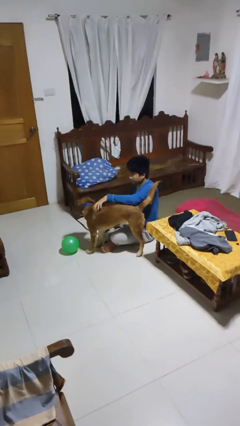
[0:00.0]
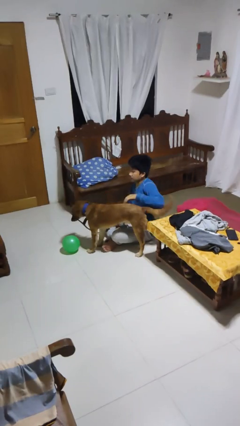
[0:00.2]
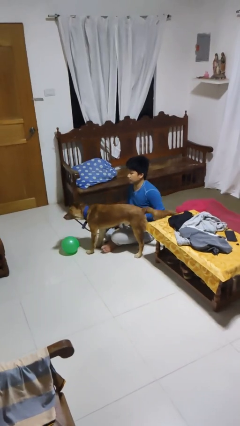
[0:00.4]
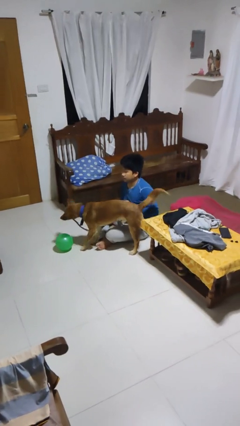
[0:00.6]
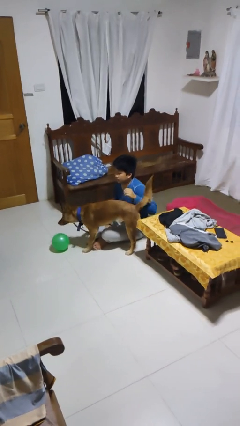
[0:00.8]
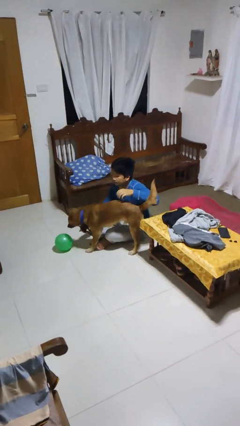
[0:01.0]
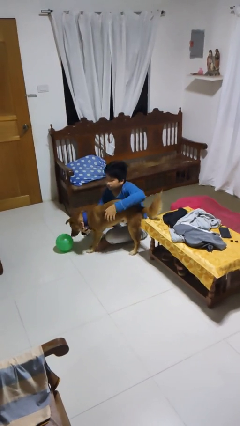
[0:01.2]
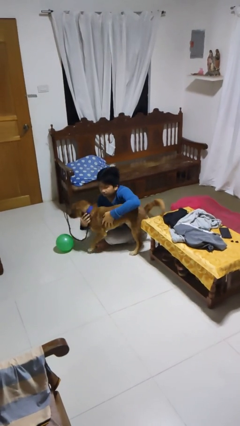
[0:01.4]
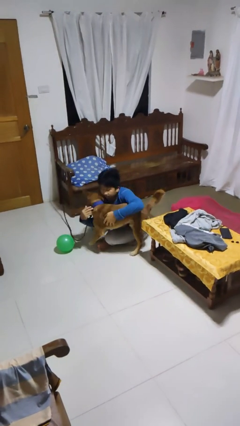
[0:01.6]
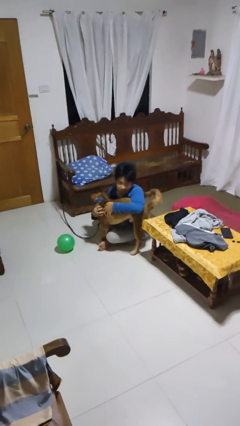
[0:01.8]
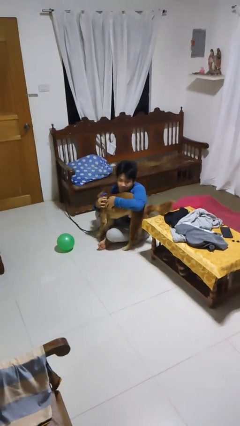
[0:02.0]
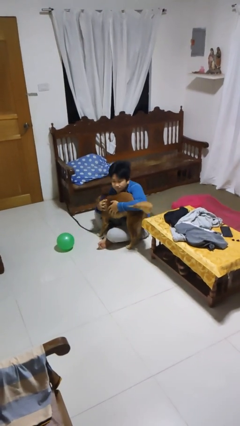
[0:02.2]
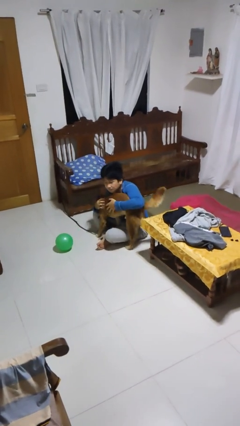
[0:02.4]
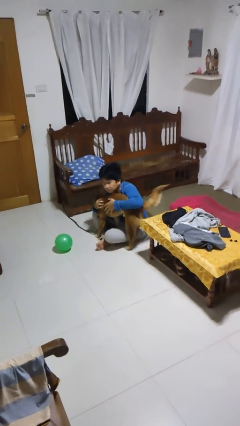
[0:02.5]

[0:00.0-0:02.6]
person hugs dog

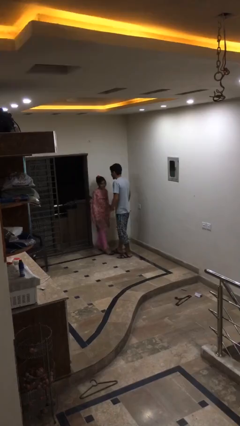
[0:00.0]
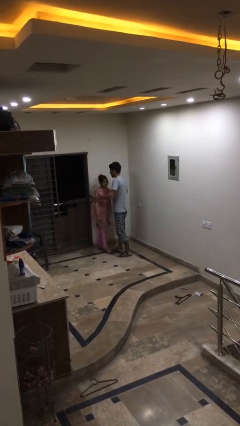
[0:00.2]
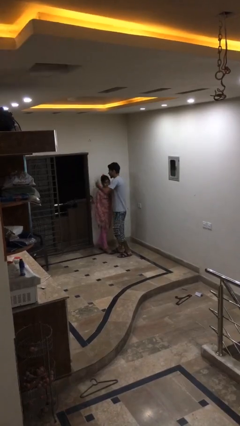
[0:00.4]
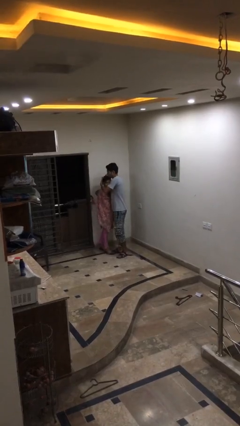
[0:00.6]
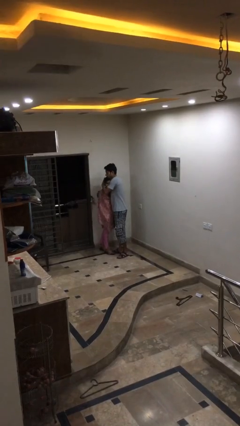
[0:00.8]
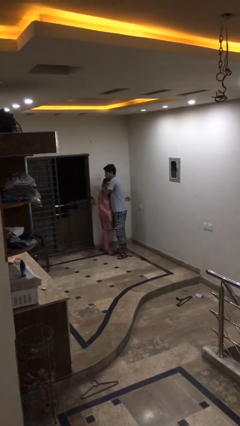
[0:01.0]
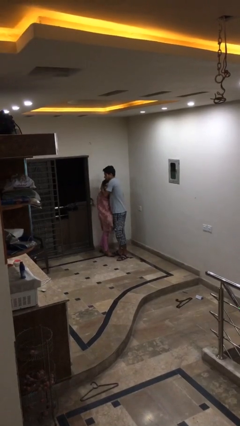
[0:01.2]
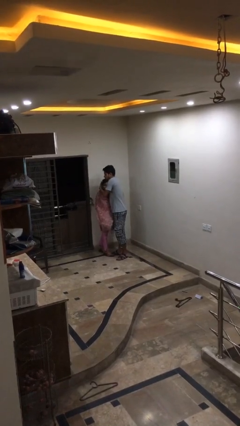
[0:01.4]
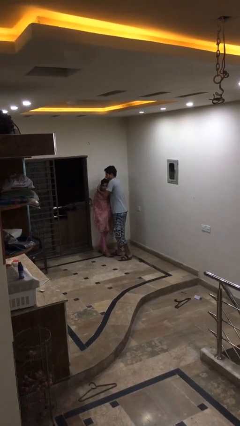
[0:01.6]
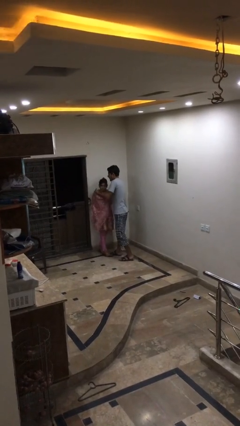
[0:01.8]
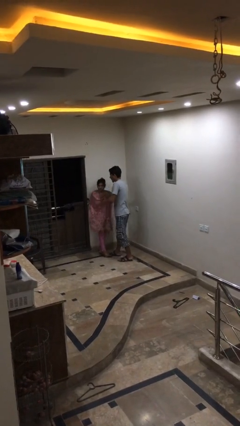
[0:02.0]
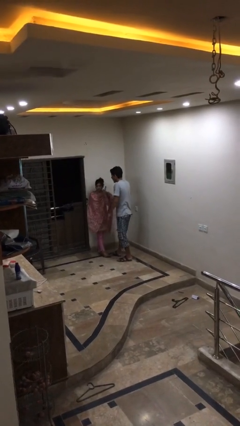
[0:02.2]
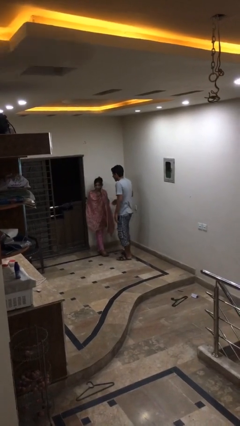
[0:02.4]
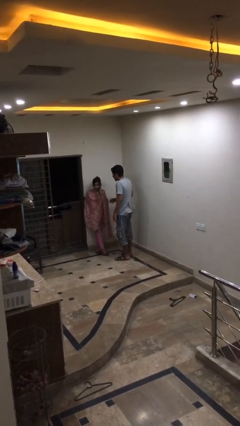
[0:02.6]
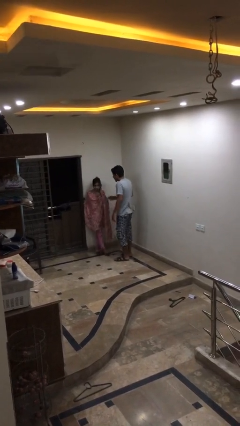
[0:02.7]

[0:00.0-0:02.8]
person embraces person

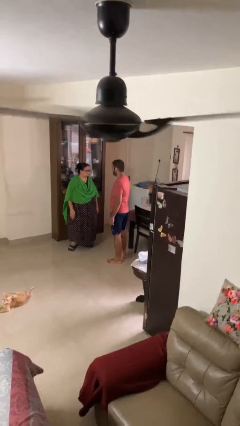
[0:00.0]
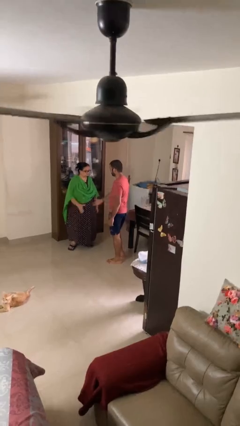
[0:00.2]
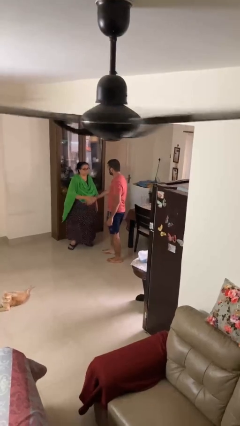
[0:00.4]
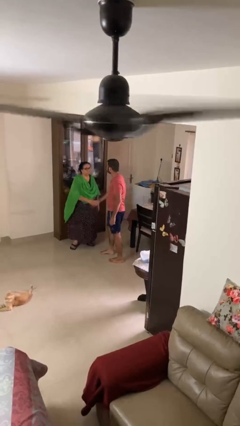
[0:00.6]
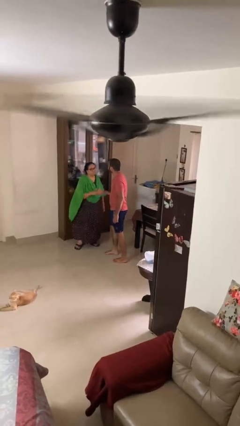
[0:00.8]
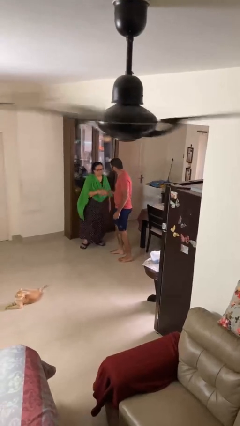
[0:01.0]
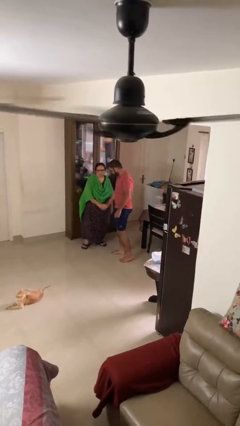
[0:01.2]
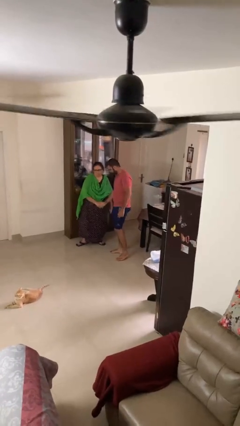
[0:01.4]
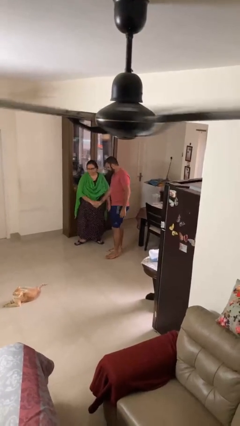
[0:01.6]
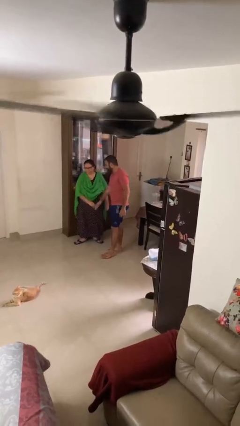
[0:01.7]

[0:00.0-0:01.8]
person shakes hand

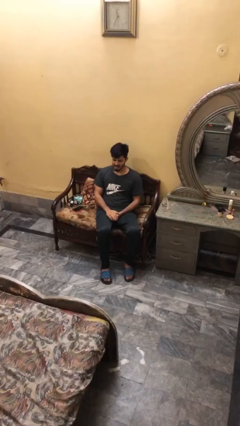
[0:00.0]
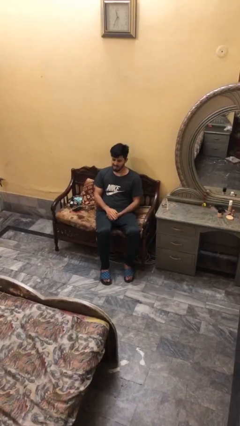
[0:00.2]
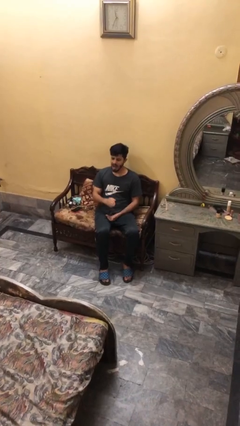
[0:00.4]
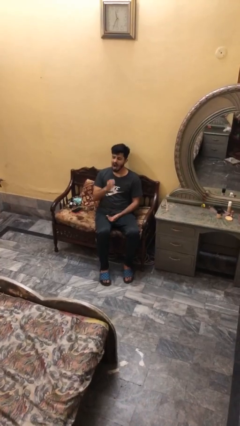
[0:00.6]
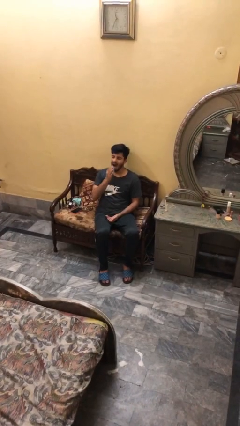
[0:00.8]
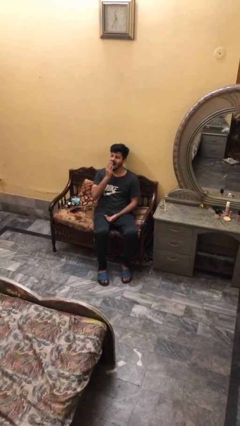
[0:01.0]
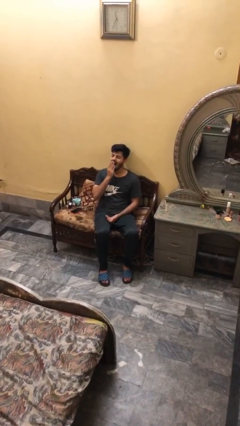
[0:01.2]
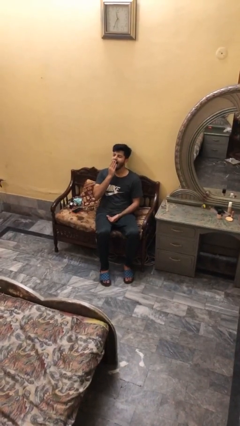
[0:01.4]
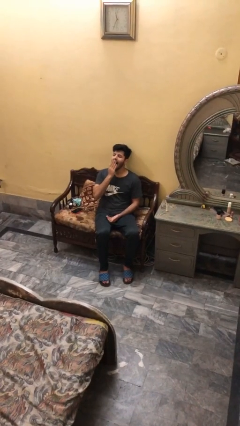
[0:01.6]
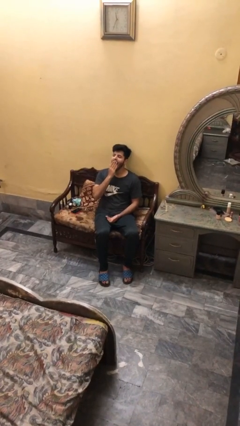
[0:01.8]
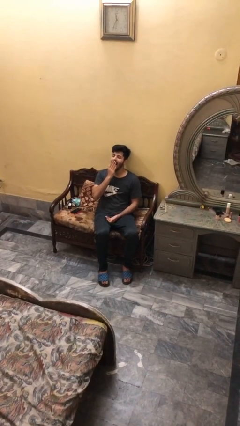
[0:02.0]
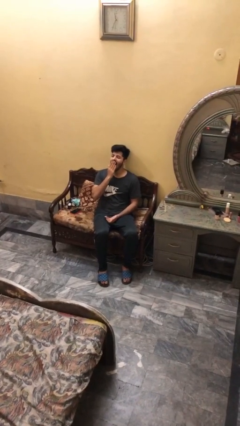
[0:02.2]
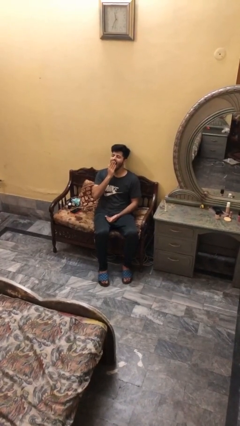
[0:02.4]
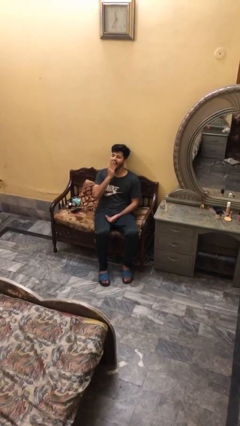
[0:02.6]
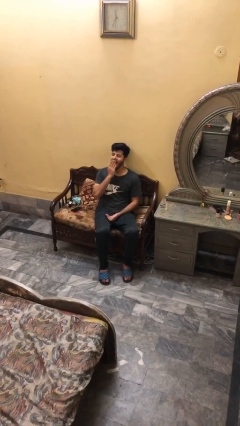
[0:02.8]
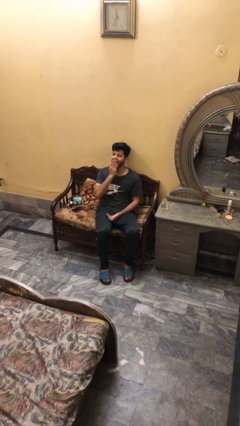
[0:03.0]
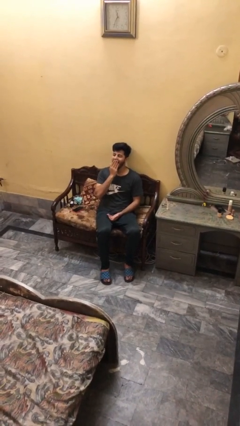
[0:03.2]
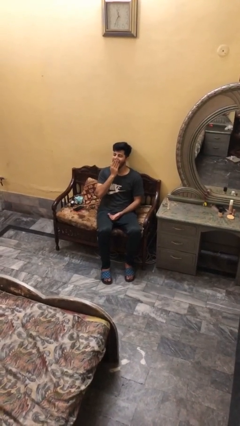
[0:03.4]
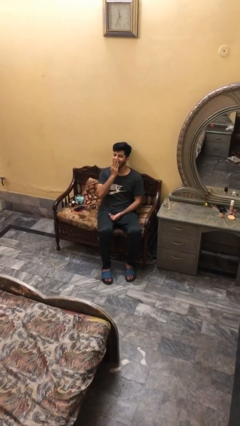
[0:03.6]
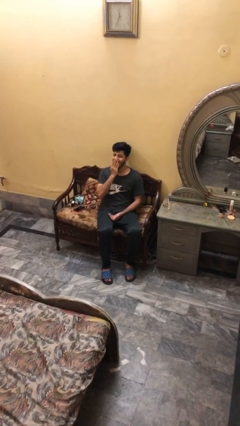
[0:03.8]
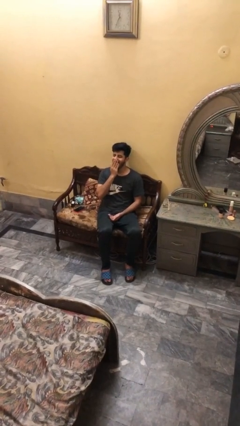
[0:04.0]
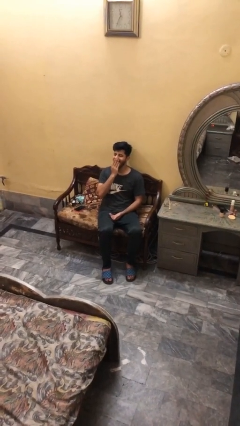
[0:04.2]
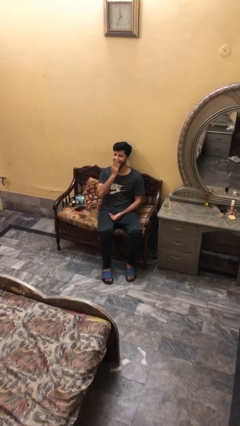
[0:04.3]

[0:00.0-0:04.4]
person yawns

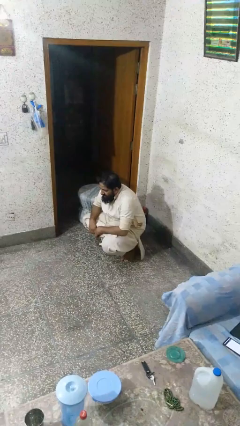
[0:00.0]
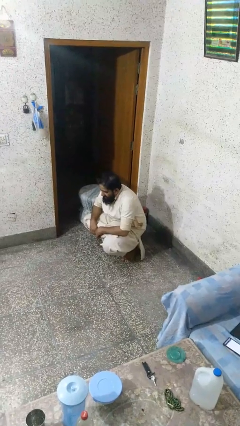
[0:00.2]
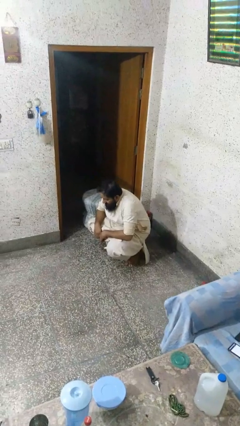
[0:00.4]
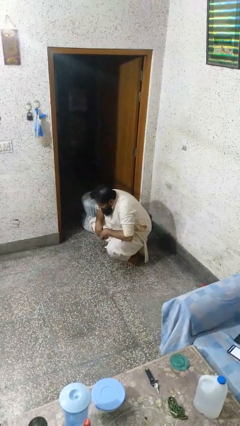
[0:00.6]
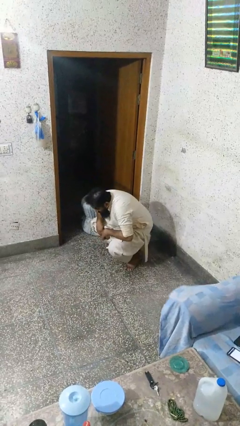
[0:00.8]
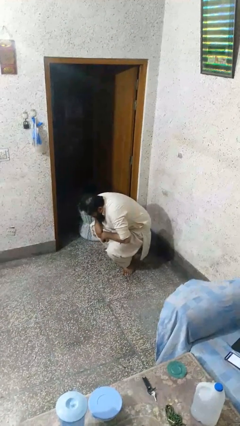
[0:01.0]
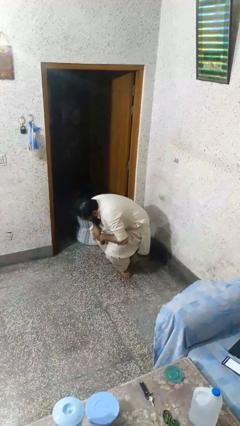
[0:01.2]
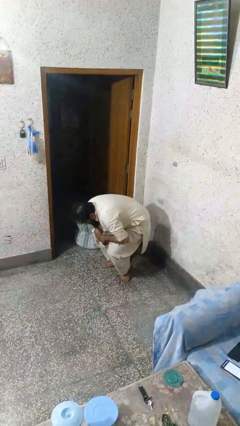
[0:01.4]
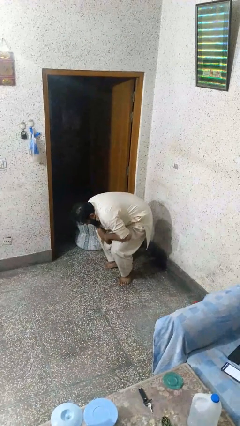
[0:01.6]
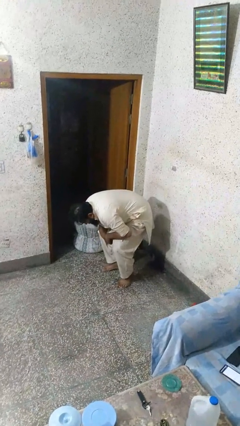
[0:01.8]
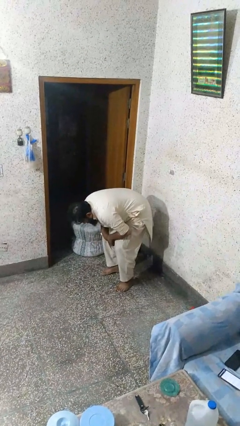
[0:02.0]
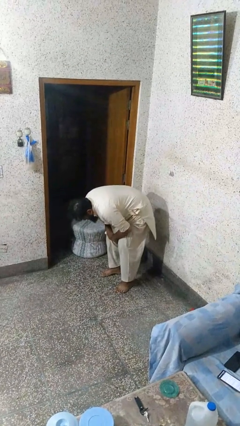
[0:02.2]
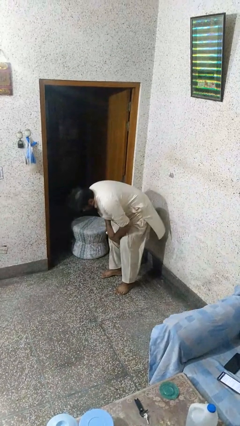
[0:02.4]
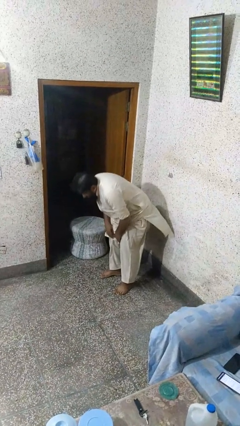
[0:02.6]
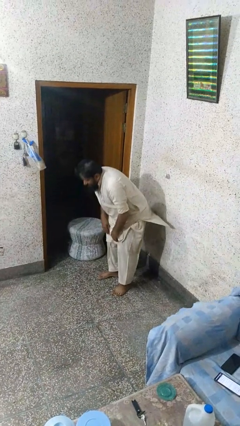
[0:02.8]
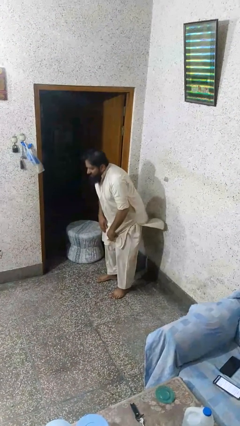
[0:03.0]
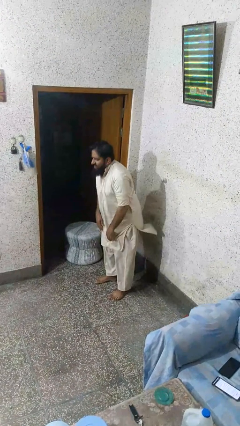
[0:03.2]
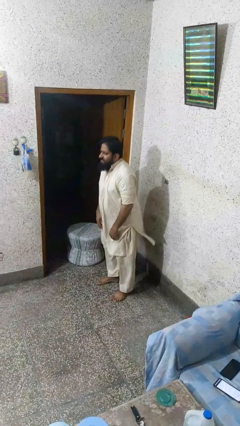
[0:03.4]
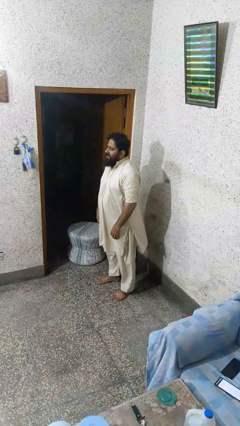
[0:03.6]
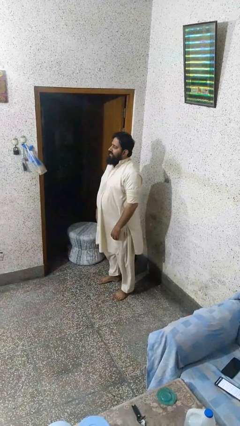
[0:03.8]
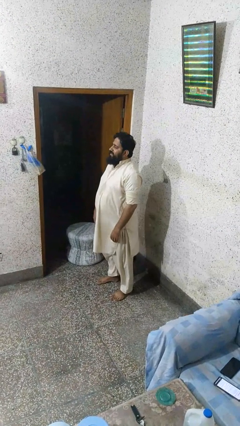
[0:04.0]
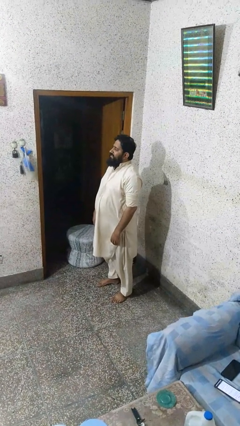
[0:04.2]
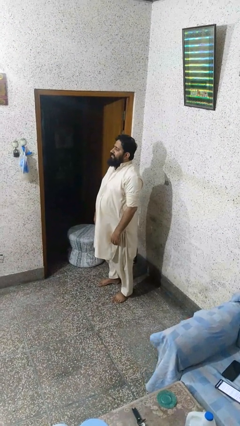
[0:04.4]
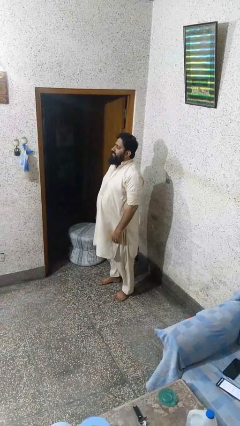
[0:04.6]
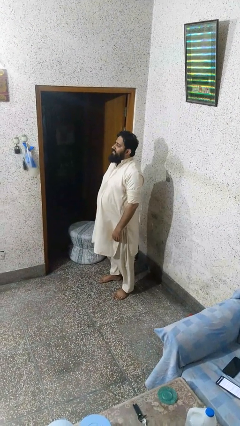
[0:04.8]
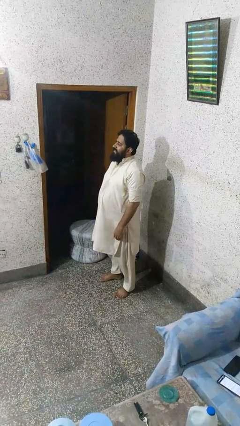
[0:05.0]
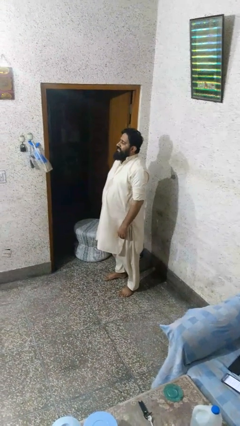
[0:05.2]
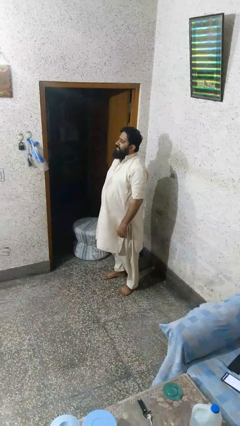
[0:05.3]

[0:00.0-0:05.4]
person stands up
